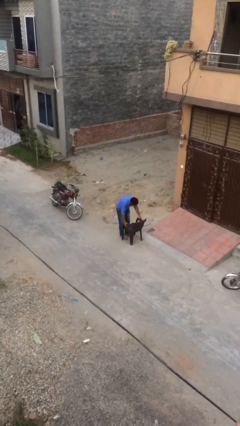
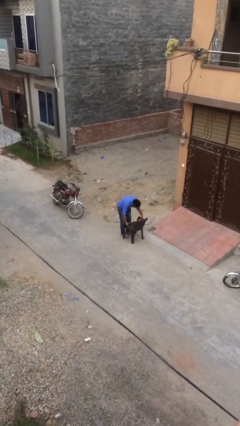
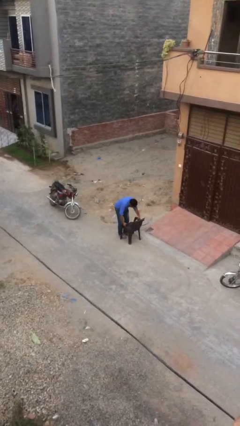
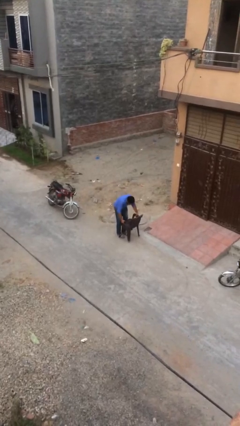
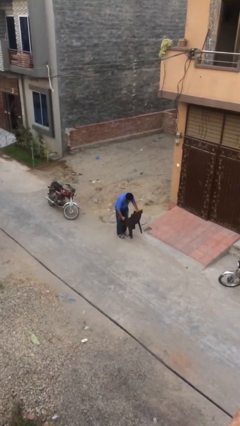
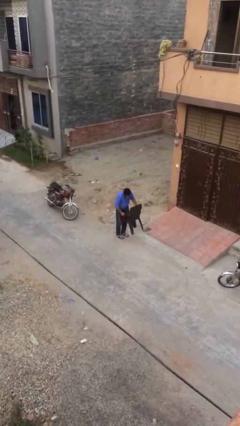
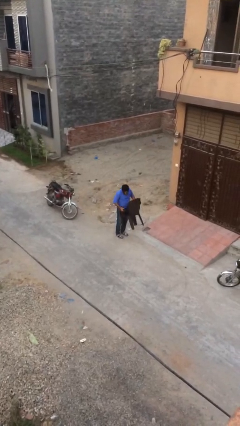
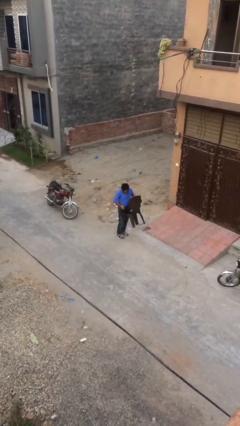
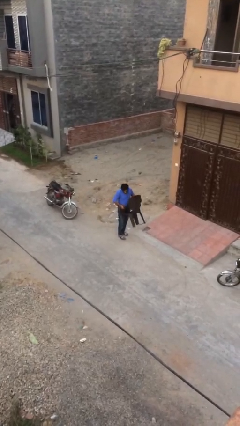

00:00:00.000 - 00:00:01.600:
person picks up object from floor

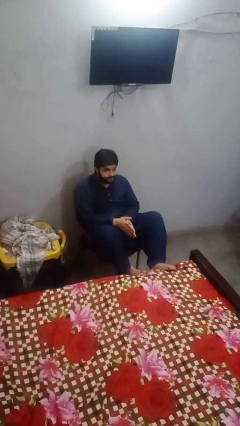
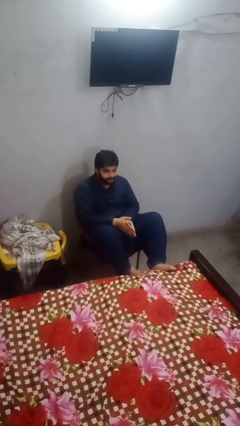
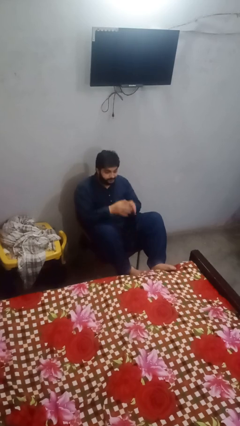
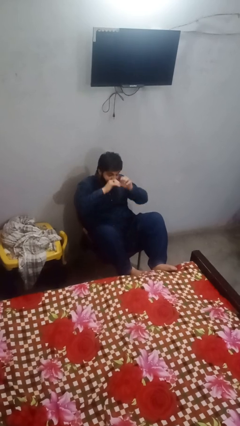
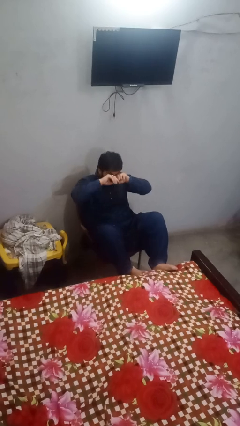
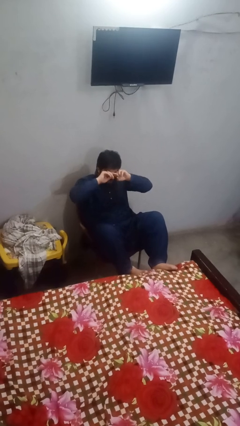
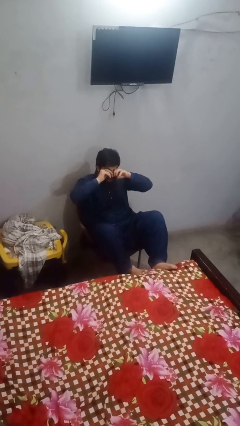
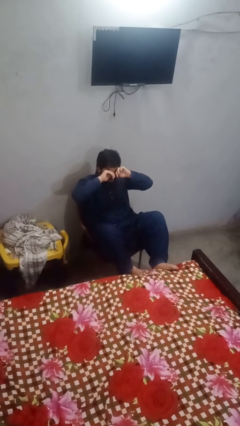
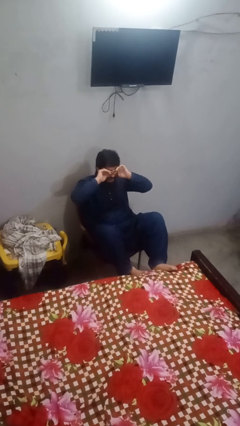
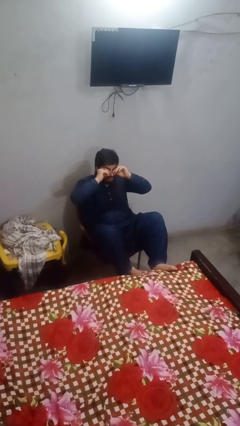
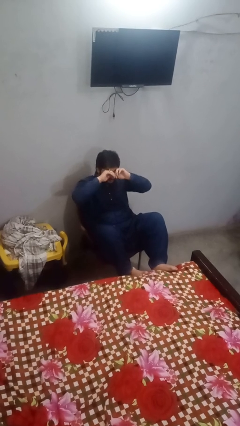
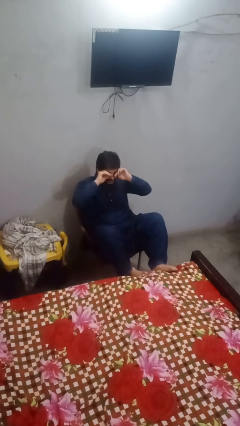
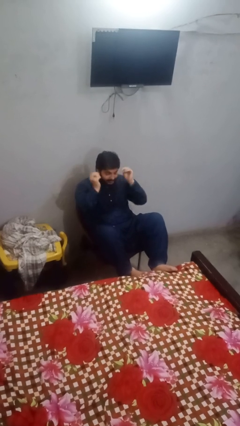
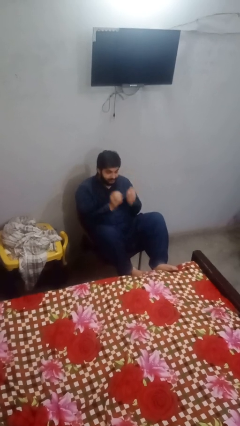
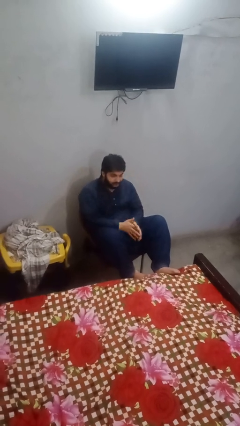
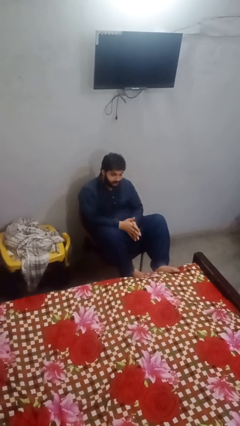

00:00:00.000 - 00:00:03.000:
person rubs eyes

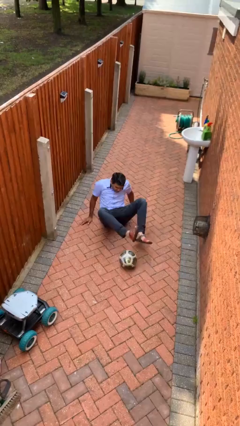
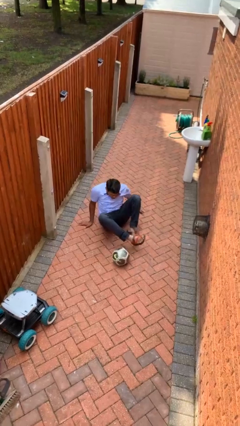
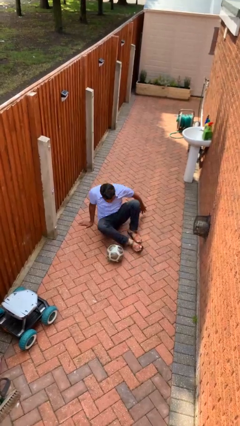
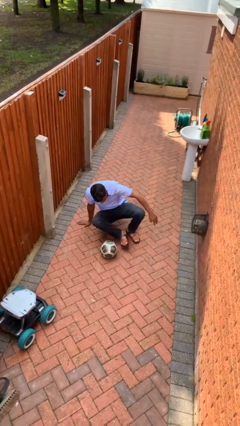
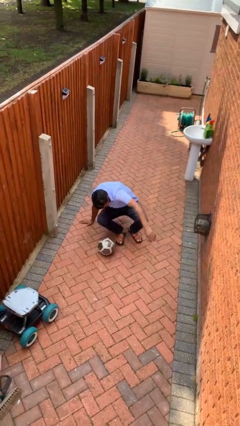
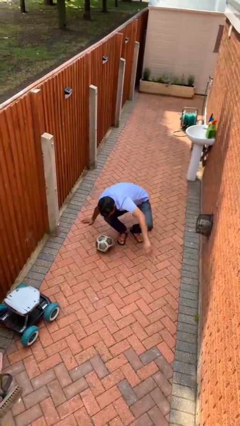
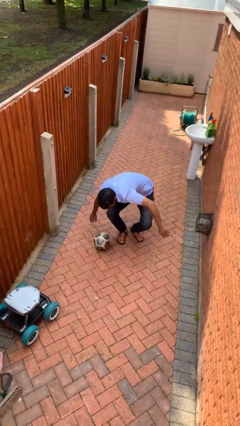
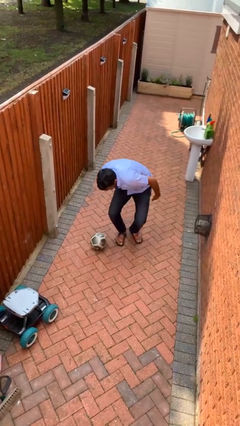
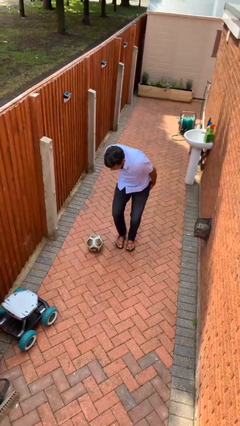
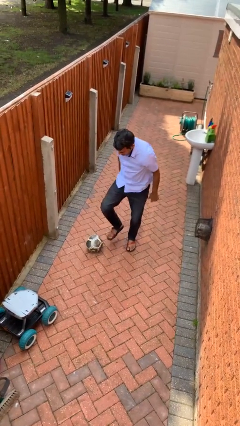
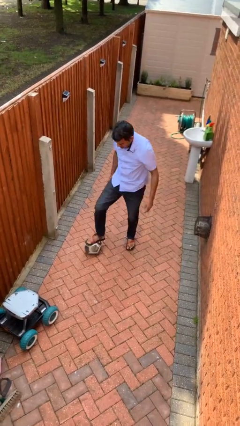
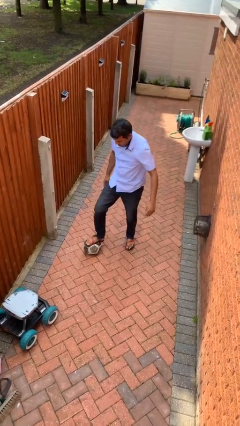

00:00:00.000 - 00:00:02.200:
person stands up from floor

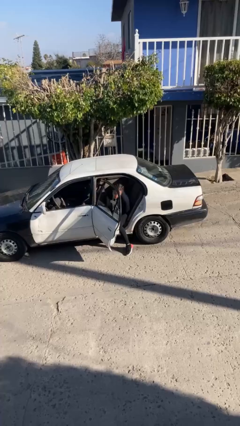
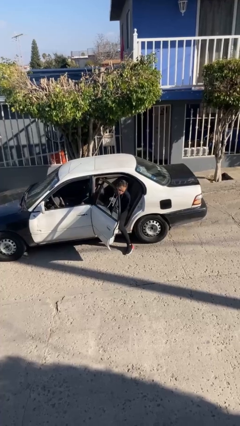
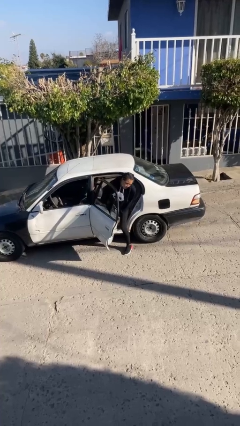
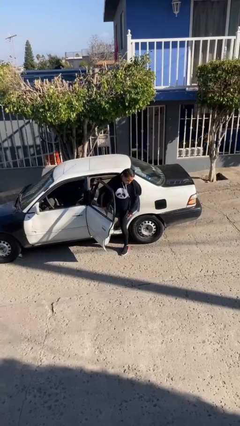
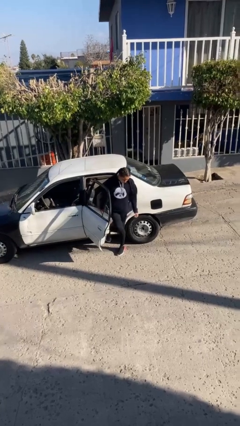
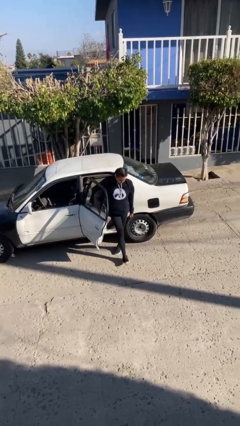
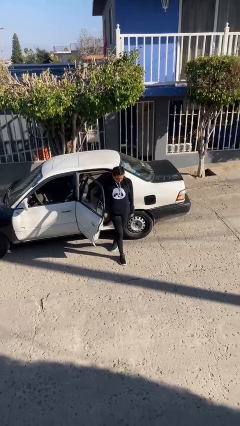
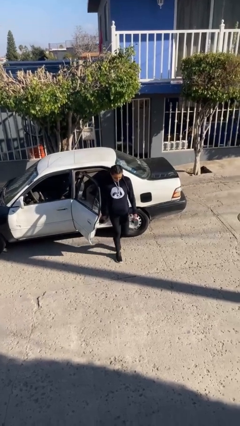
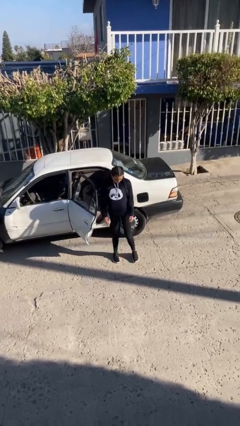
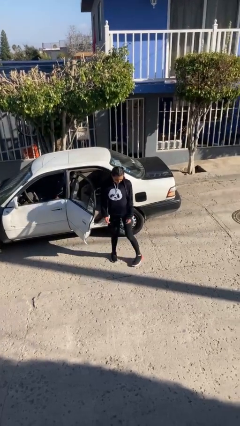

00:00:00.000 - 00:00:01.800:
person exits car

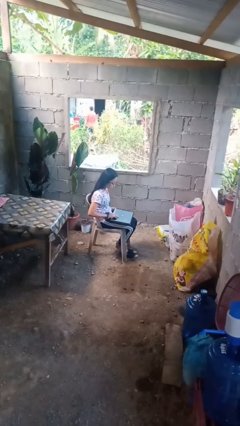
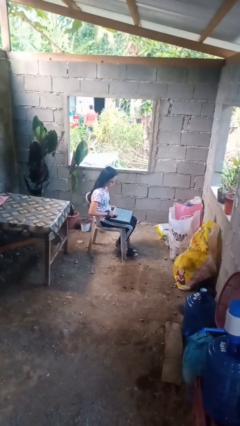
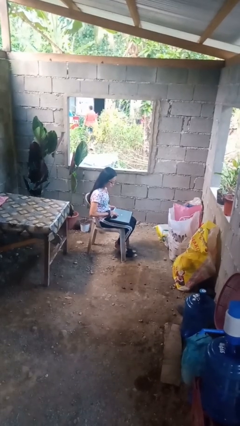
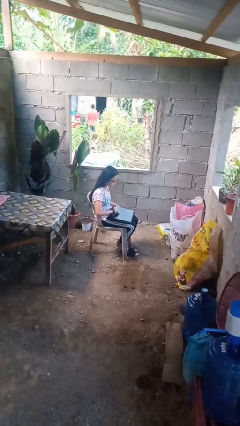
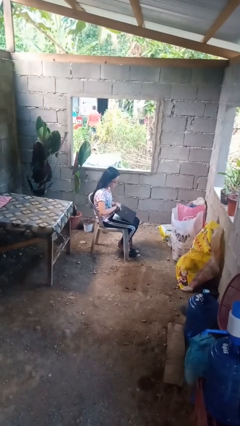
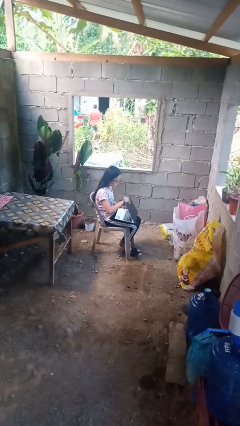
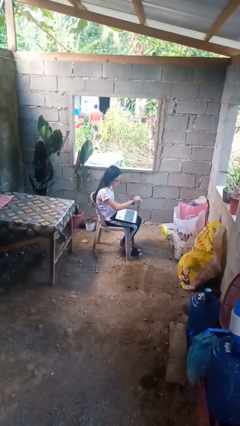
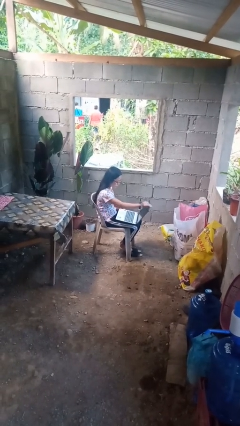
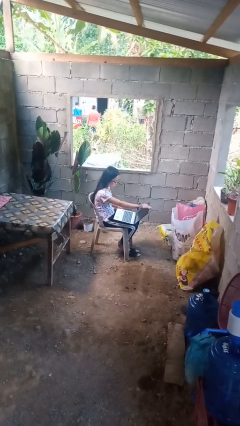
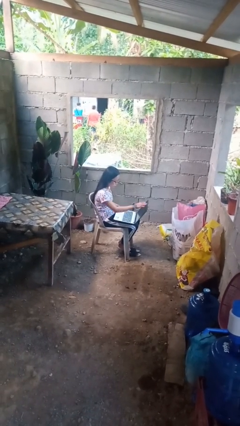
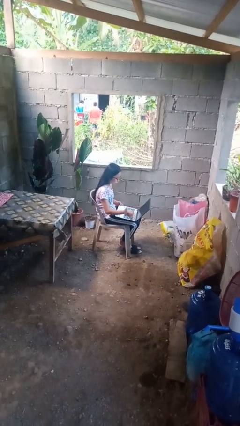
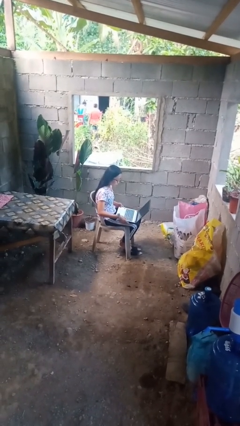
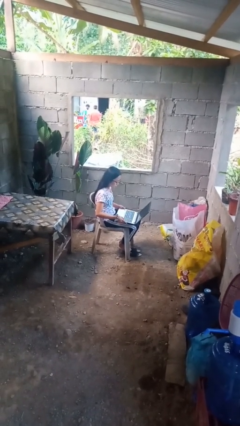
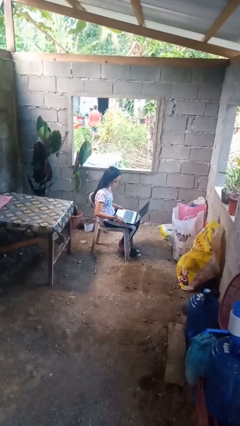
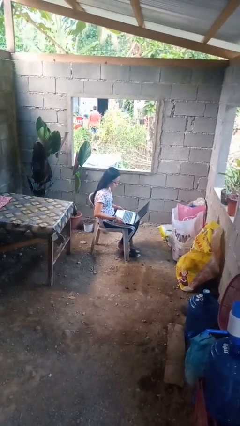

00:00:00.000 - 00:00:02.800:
person opens laptop

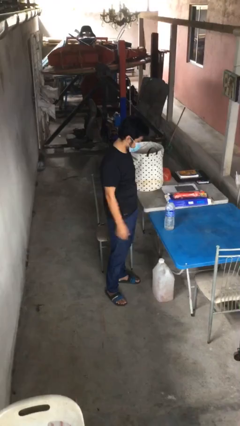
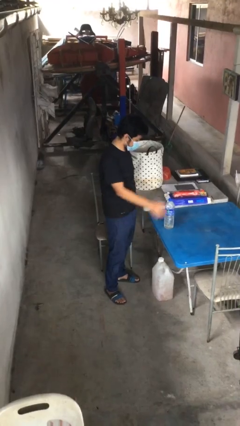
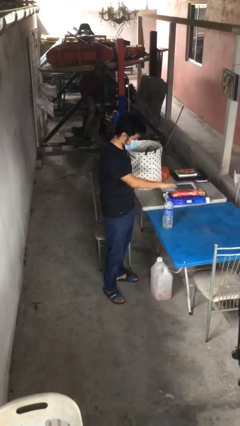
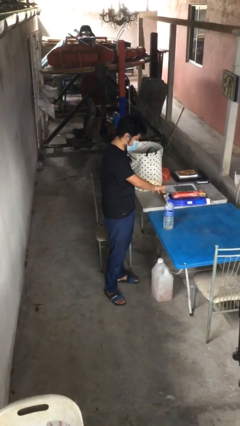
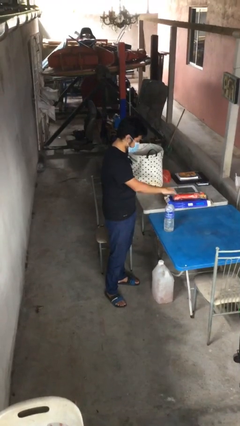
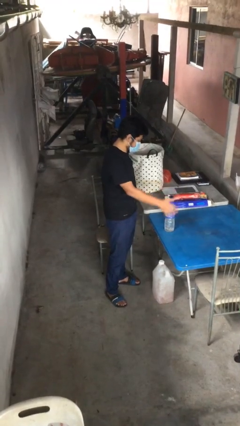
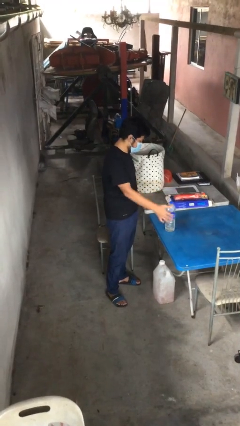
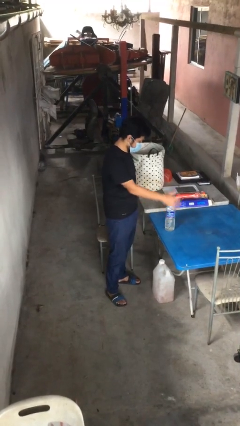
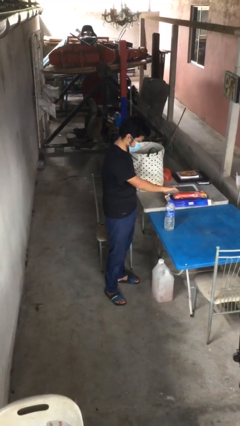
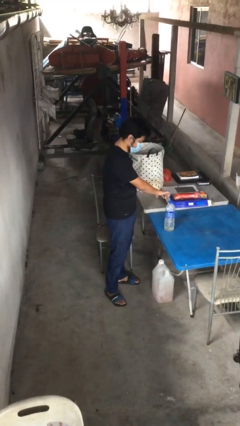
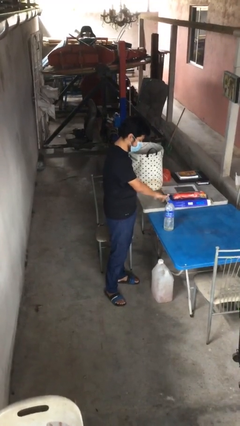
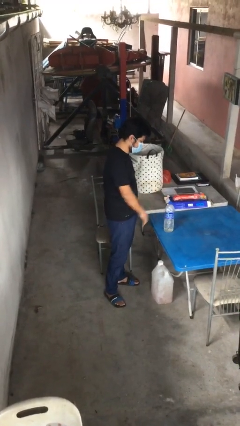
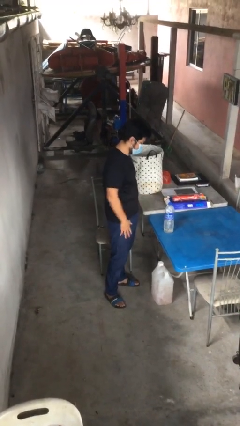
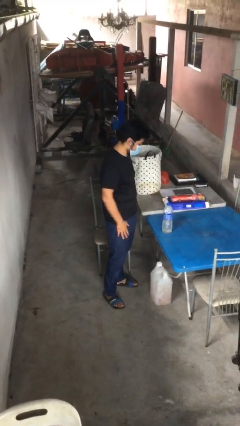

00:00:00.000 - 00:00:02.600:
person waves hand over object

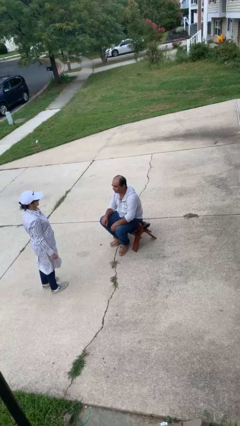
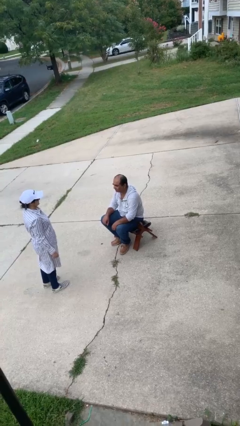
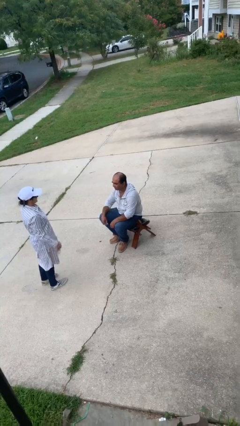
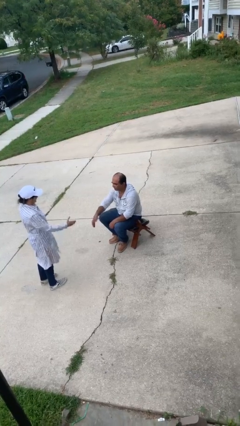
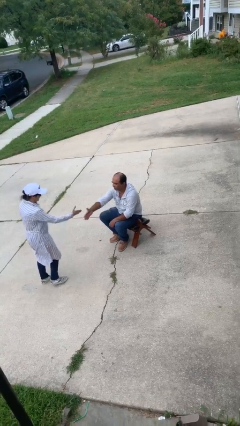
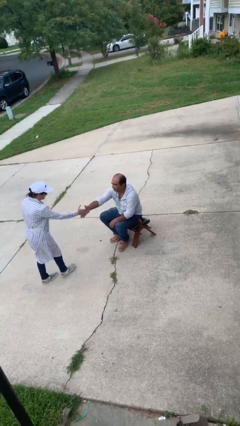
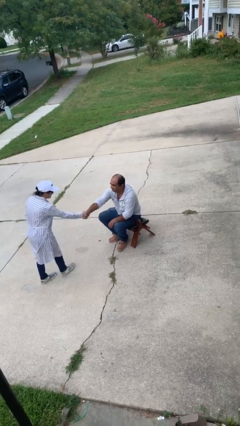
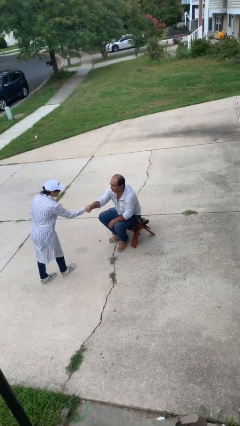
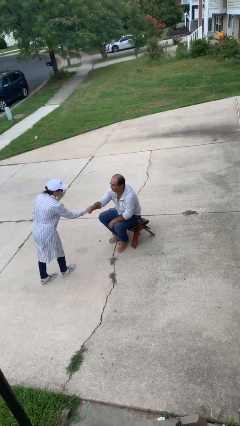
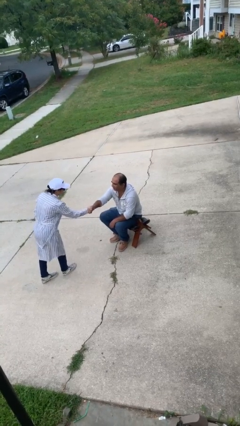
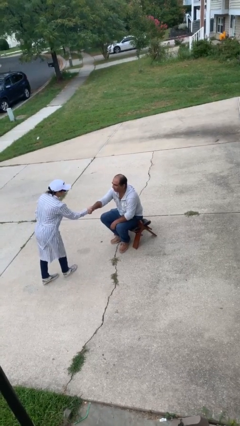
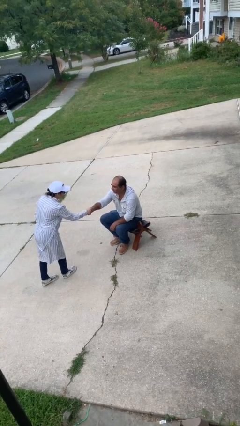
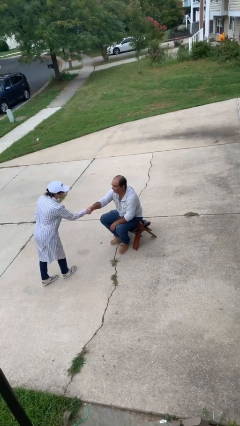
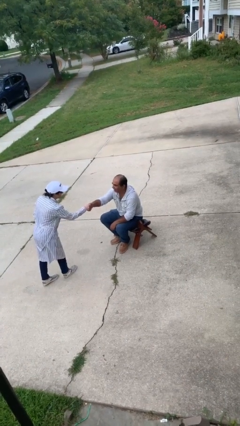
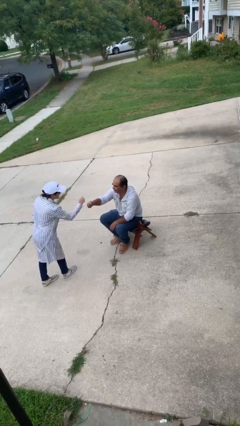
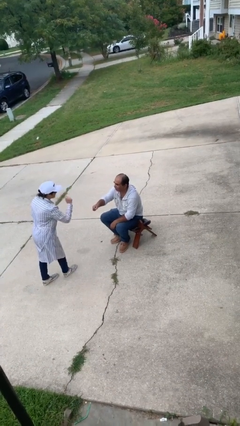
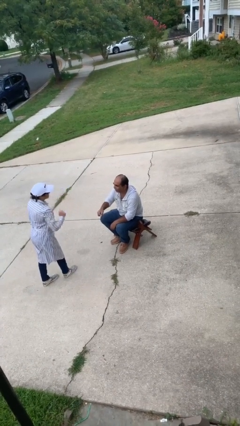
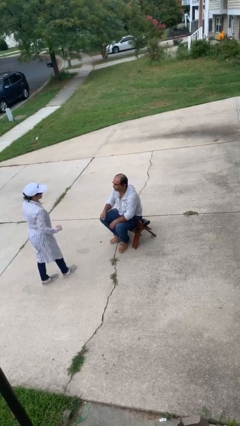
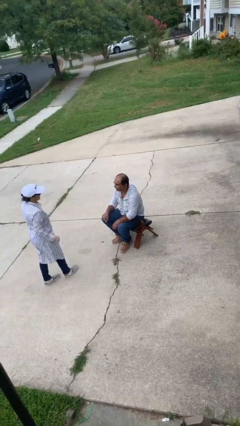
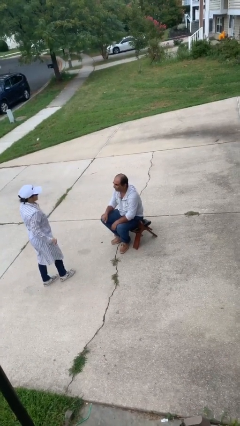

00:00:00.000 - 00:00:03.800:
person shakes hand
